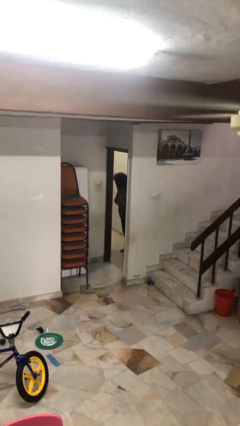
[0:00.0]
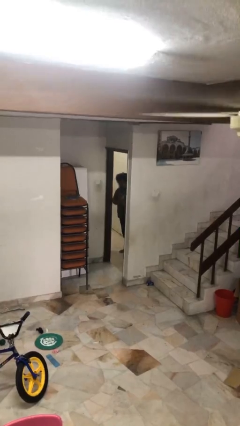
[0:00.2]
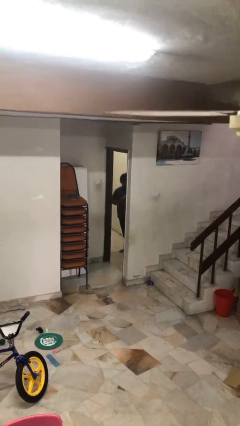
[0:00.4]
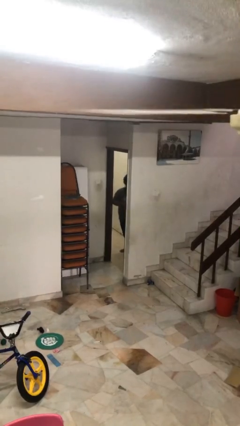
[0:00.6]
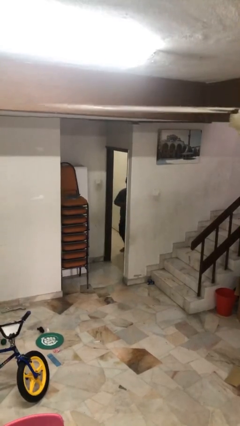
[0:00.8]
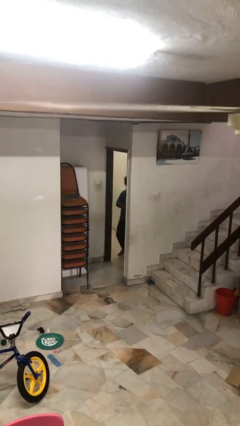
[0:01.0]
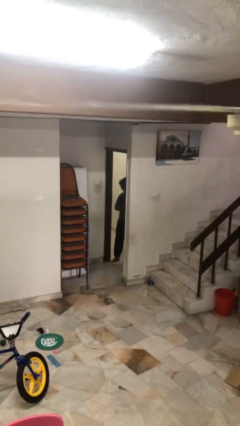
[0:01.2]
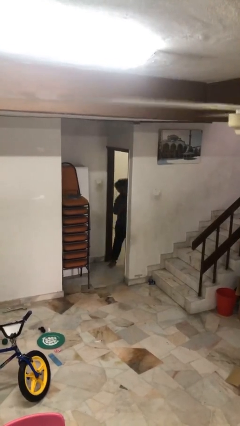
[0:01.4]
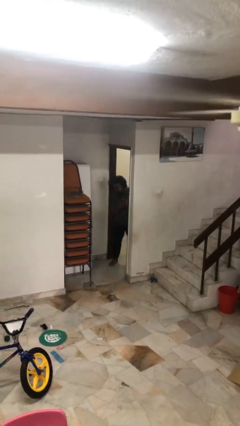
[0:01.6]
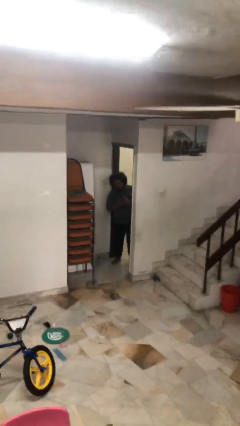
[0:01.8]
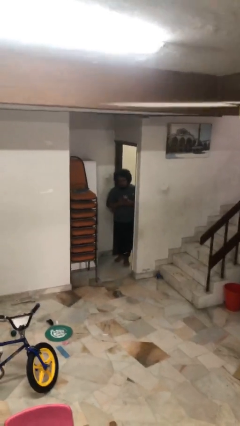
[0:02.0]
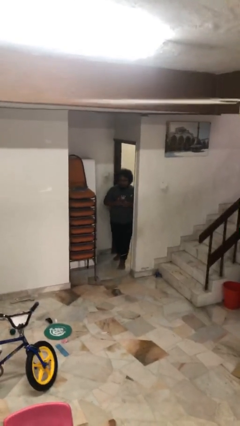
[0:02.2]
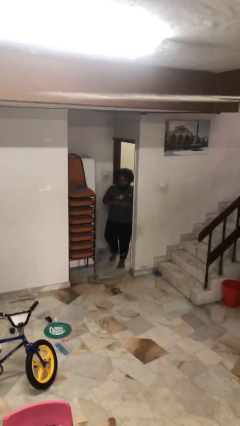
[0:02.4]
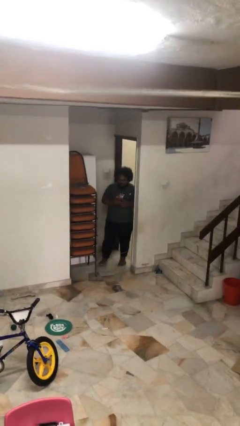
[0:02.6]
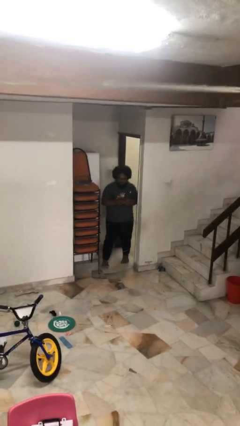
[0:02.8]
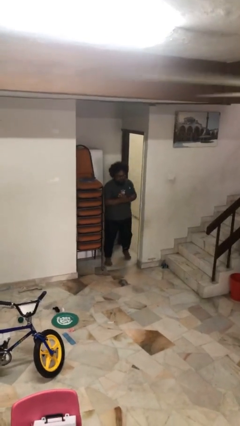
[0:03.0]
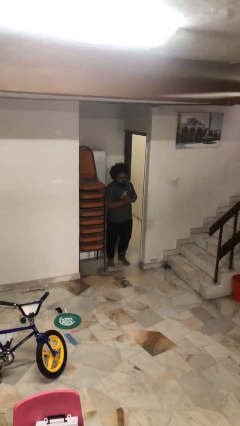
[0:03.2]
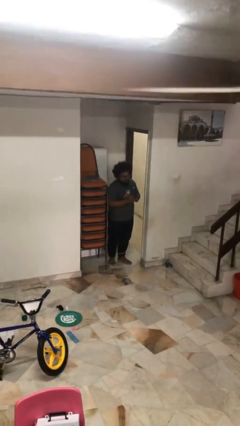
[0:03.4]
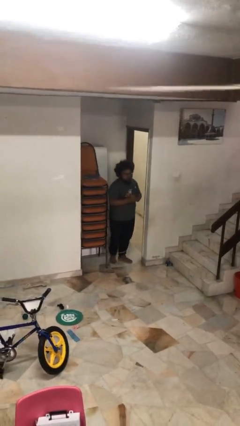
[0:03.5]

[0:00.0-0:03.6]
person enters scene through structure

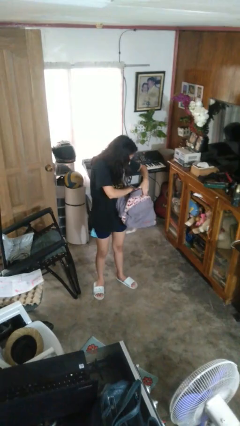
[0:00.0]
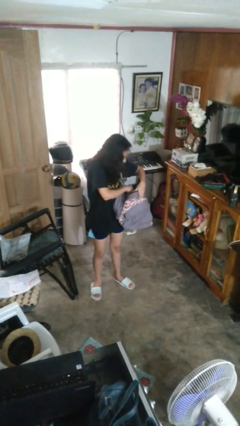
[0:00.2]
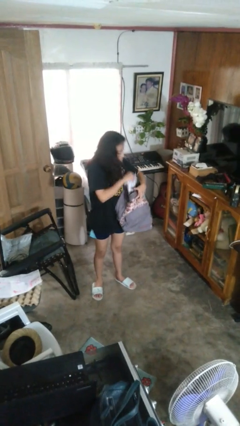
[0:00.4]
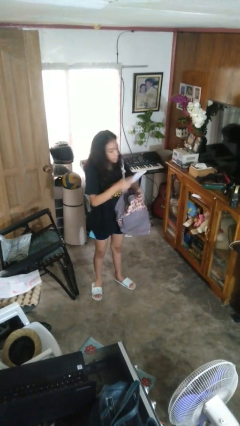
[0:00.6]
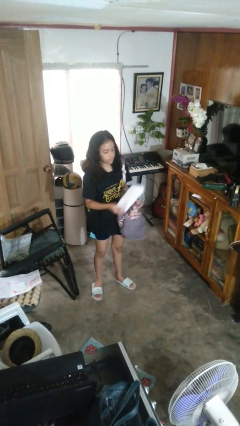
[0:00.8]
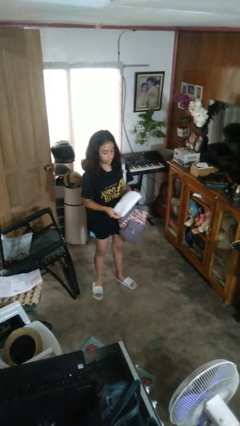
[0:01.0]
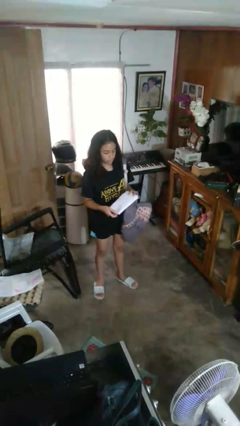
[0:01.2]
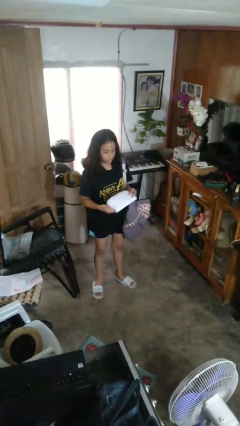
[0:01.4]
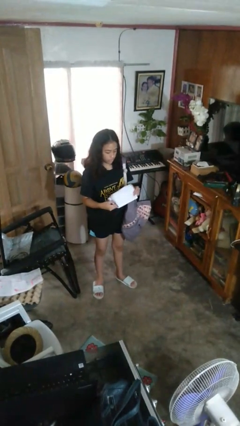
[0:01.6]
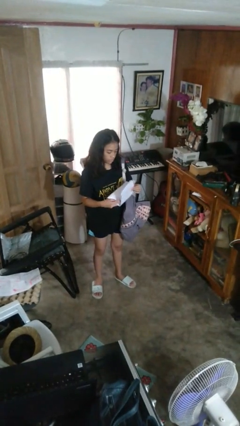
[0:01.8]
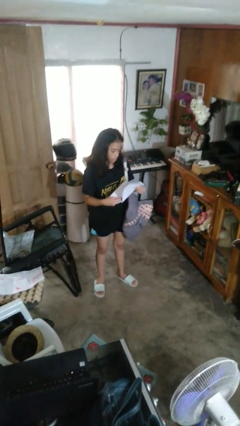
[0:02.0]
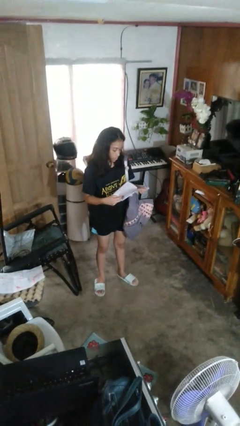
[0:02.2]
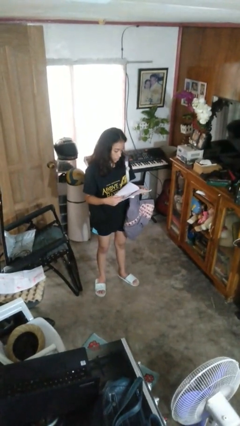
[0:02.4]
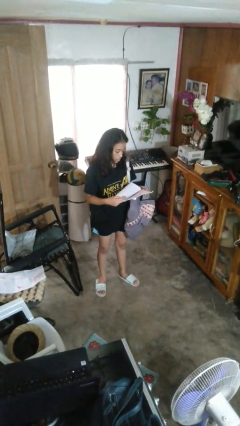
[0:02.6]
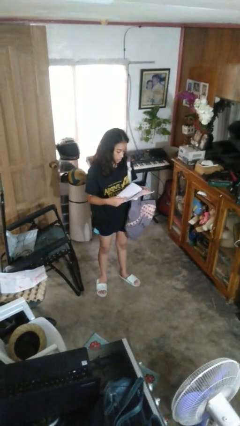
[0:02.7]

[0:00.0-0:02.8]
person takes object from backpack

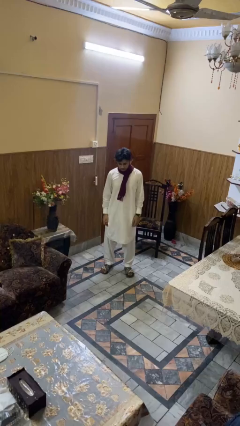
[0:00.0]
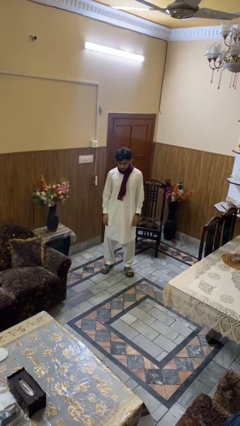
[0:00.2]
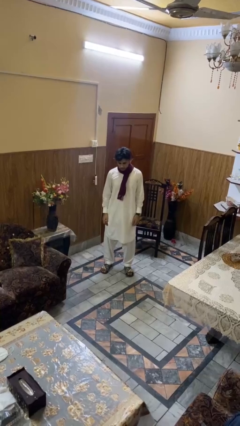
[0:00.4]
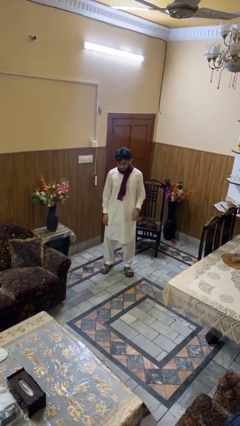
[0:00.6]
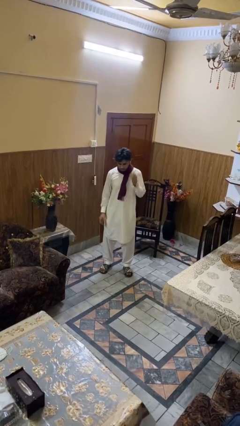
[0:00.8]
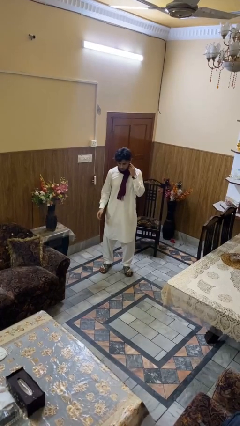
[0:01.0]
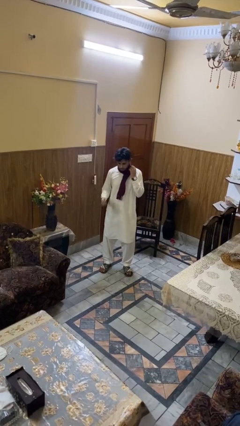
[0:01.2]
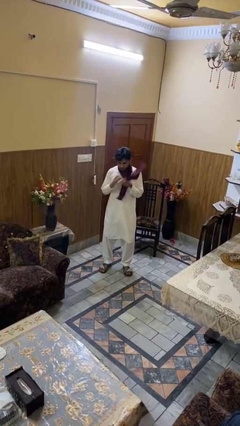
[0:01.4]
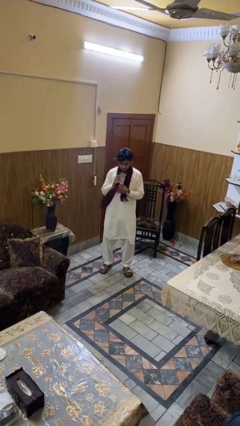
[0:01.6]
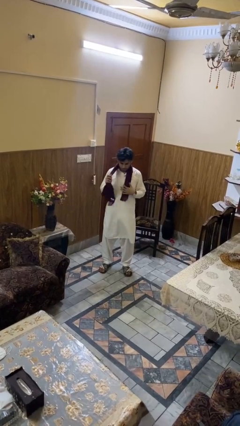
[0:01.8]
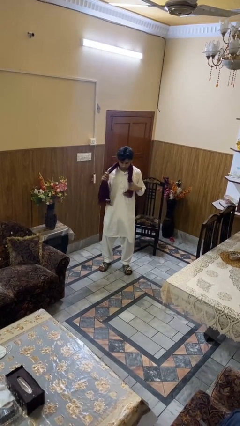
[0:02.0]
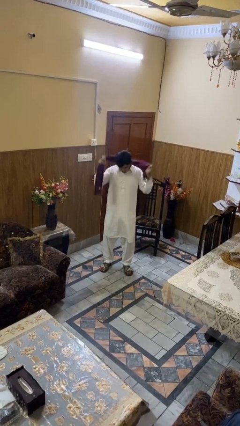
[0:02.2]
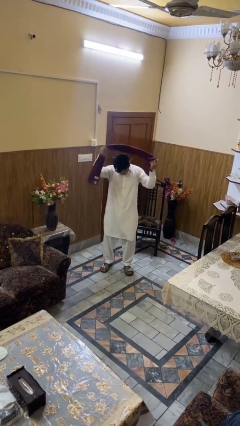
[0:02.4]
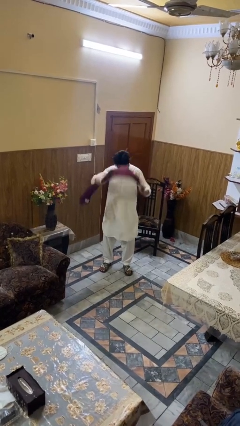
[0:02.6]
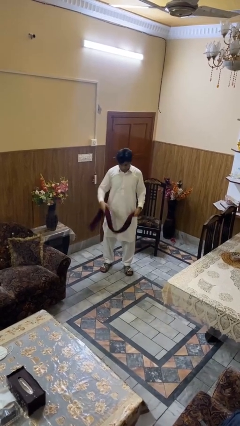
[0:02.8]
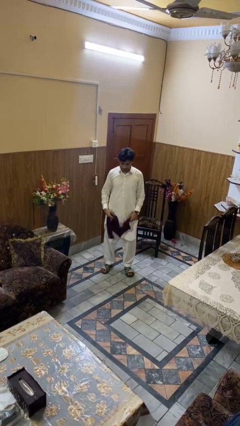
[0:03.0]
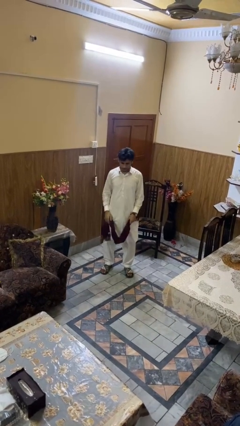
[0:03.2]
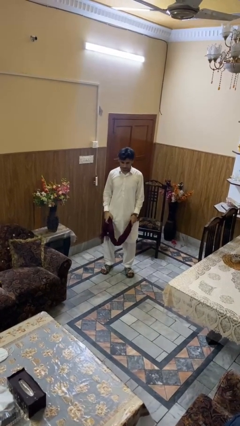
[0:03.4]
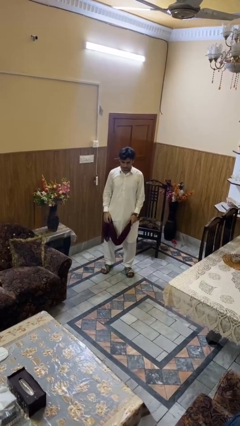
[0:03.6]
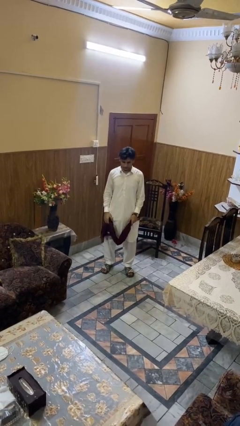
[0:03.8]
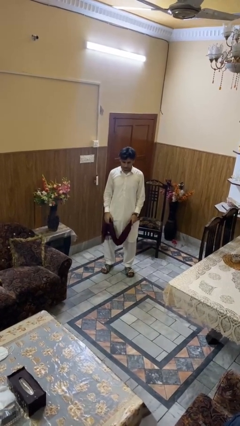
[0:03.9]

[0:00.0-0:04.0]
person takes off scarf

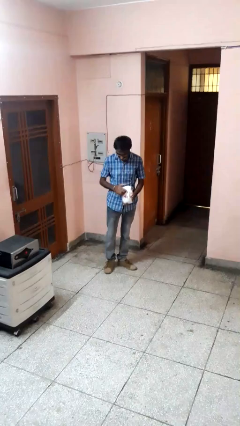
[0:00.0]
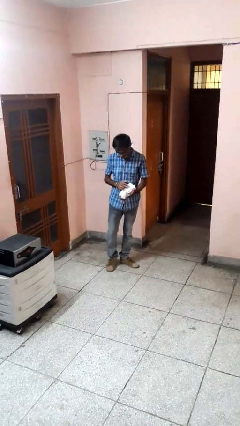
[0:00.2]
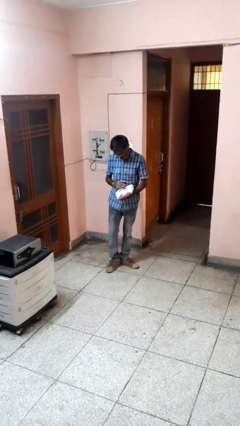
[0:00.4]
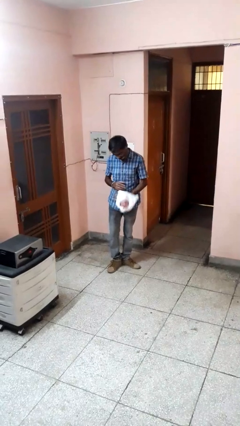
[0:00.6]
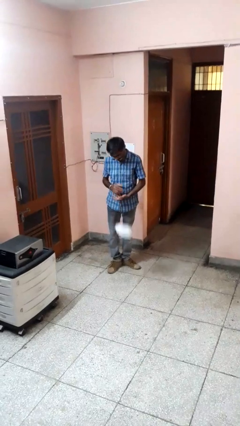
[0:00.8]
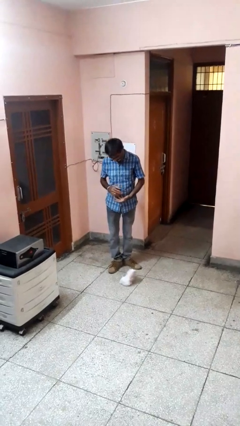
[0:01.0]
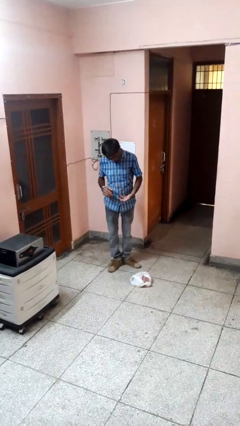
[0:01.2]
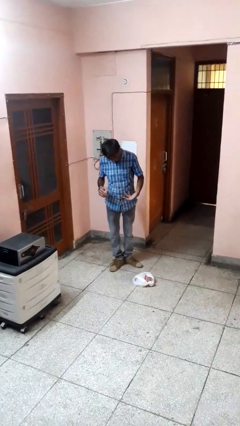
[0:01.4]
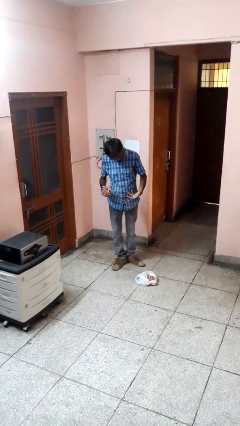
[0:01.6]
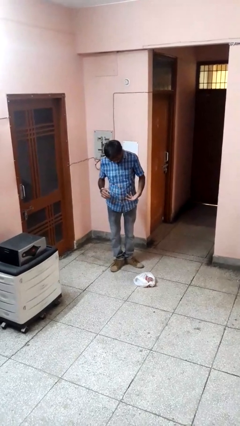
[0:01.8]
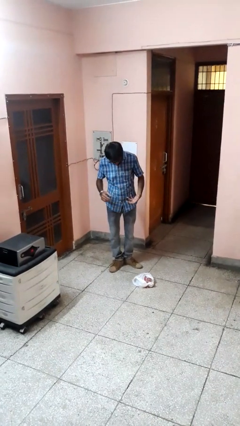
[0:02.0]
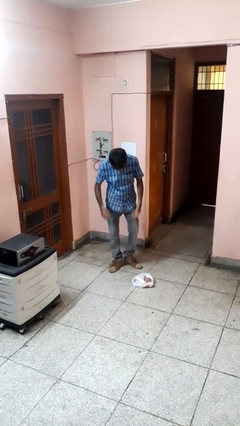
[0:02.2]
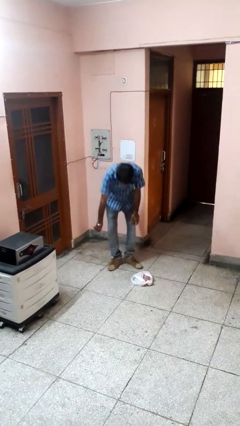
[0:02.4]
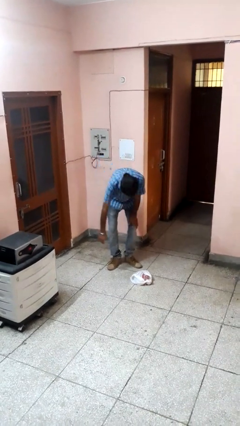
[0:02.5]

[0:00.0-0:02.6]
person drops object

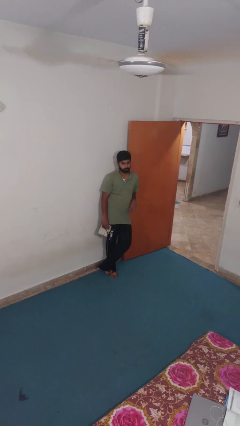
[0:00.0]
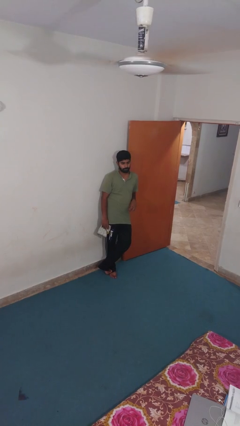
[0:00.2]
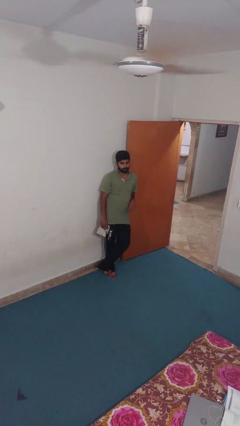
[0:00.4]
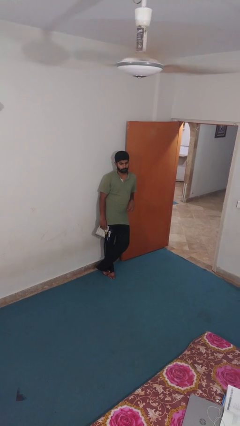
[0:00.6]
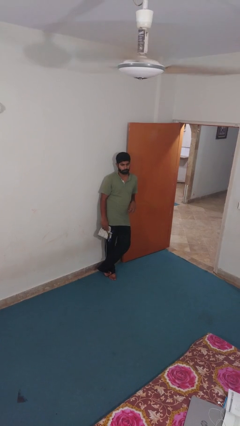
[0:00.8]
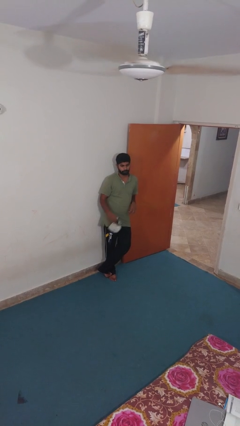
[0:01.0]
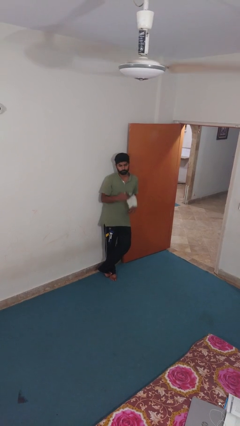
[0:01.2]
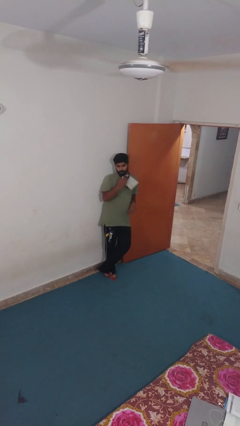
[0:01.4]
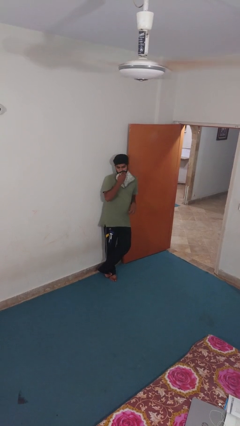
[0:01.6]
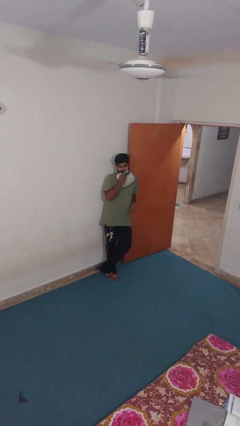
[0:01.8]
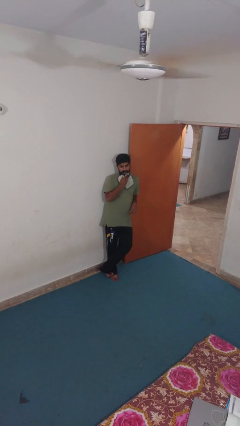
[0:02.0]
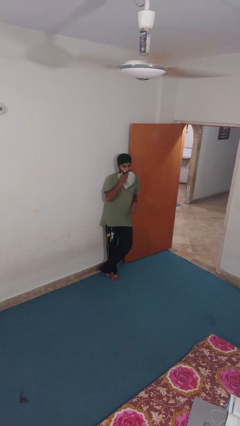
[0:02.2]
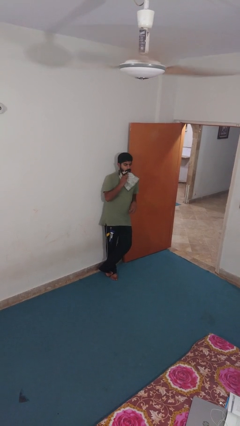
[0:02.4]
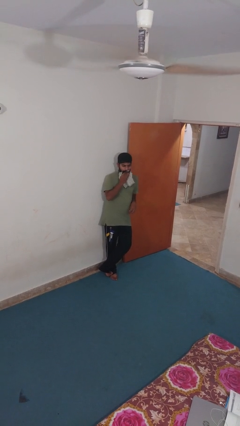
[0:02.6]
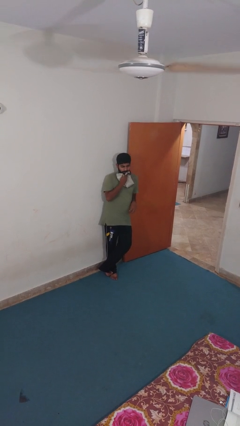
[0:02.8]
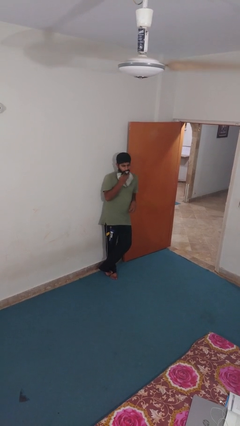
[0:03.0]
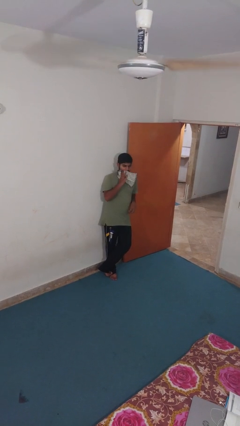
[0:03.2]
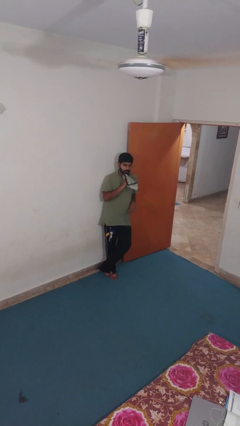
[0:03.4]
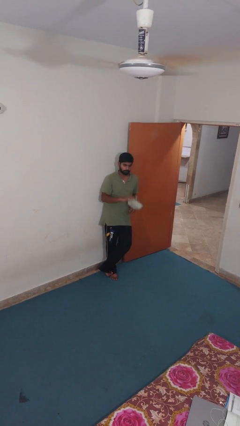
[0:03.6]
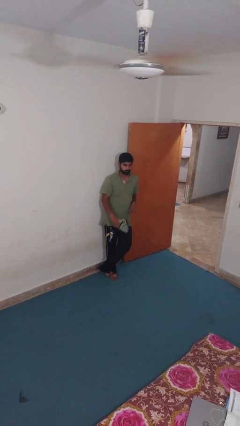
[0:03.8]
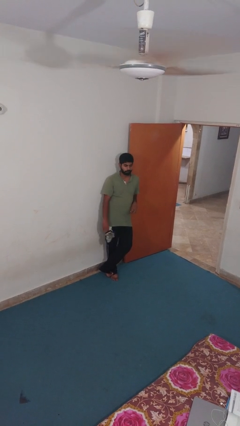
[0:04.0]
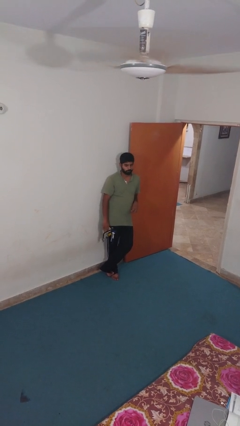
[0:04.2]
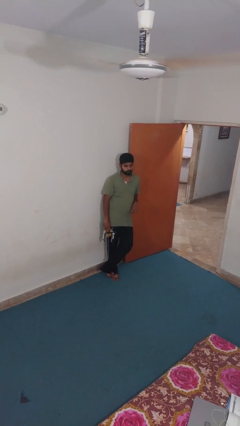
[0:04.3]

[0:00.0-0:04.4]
person wipes mouth with napkin
